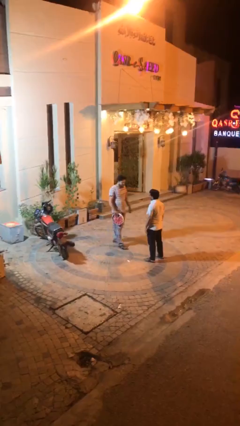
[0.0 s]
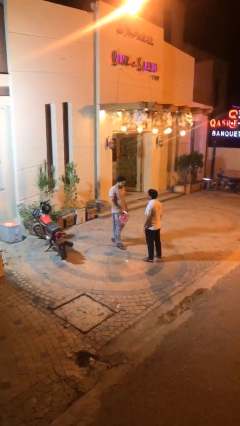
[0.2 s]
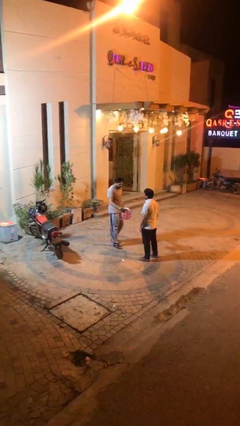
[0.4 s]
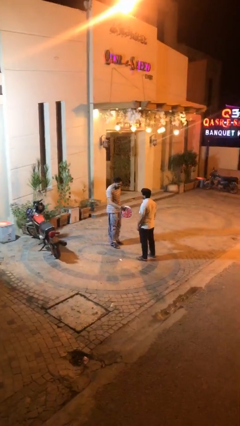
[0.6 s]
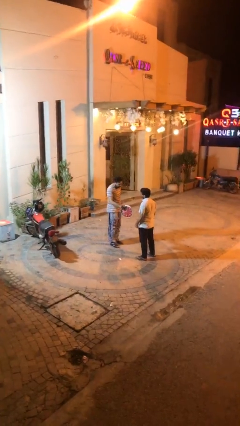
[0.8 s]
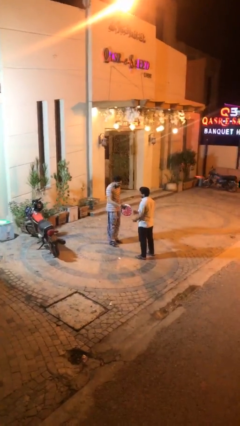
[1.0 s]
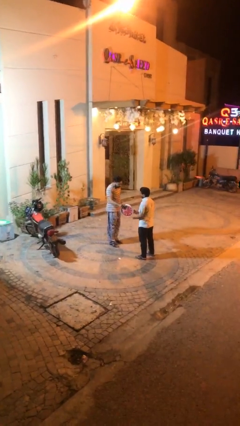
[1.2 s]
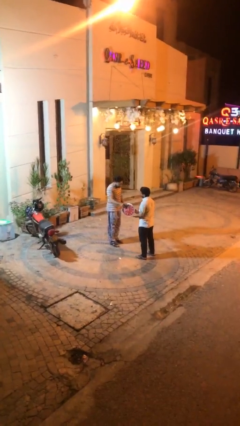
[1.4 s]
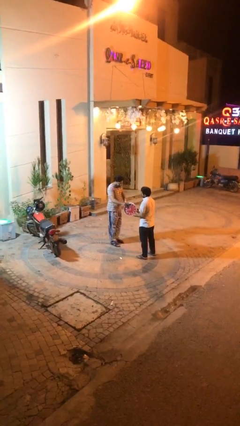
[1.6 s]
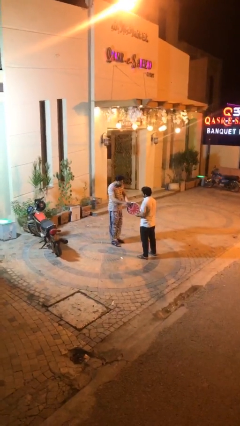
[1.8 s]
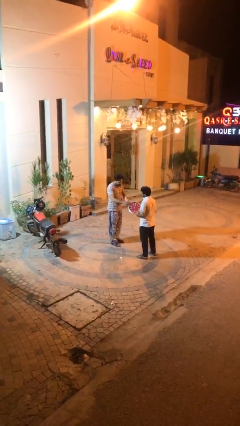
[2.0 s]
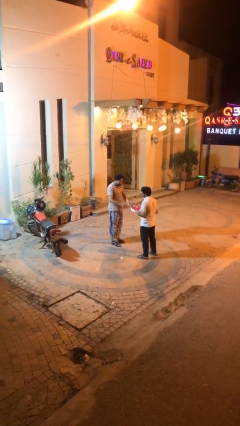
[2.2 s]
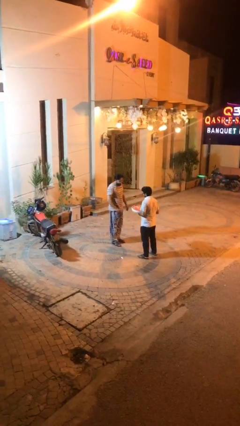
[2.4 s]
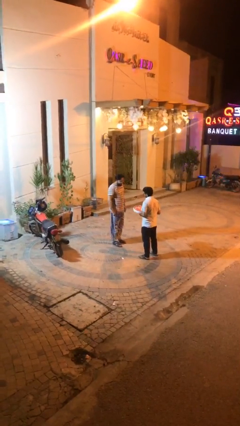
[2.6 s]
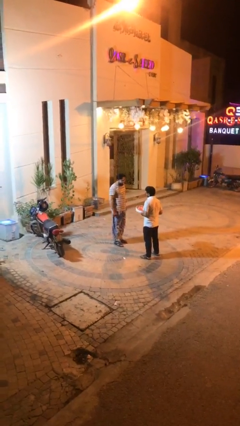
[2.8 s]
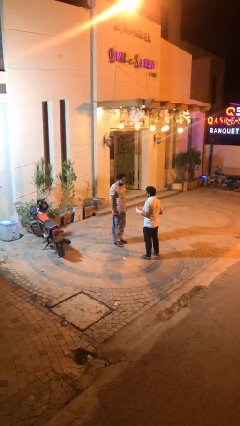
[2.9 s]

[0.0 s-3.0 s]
person transfers object to person

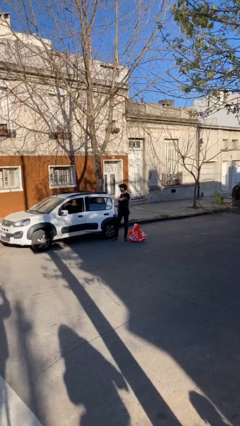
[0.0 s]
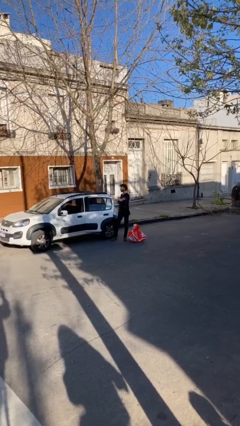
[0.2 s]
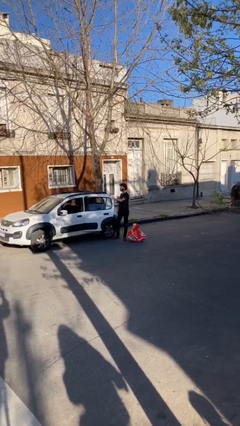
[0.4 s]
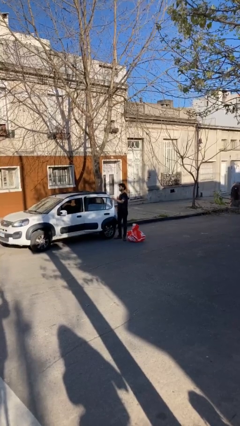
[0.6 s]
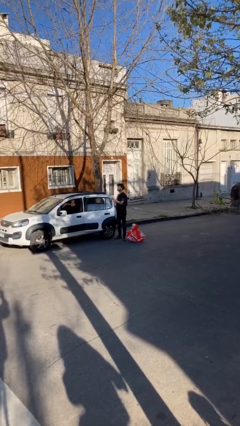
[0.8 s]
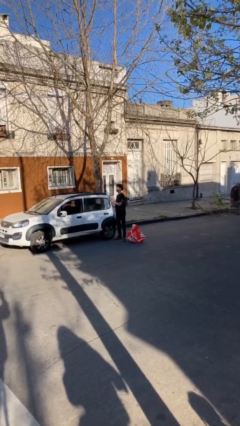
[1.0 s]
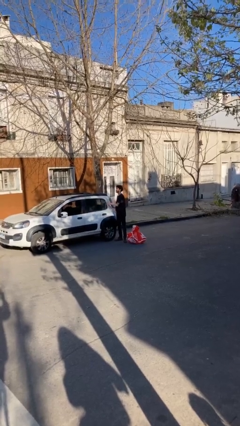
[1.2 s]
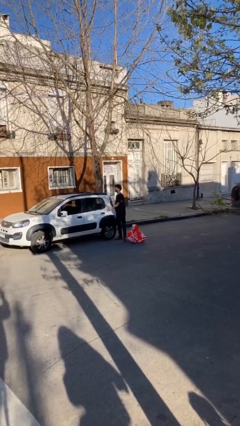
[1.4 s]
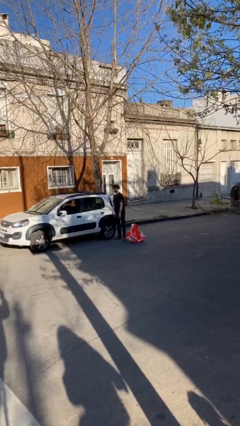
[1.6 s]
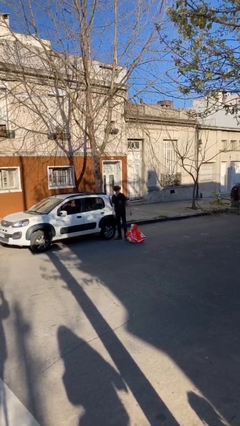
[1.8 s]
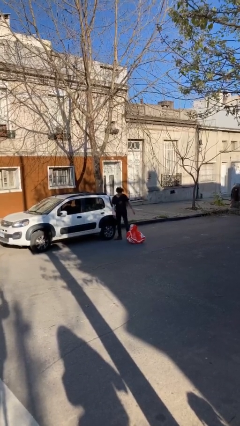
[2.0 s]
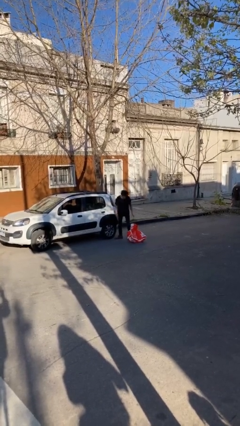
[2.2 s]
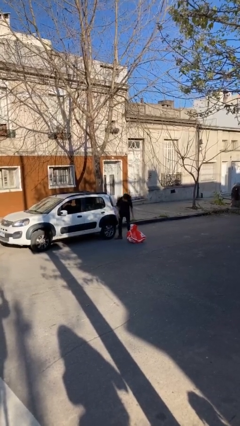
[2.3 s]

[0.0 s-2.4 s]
person closes car door

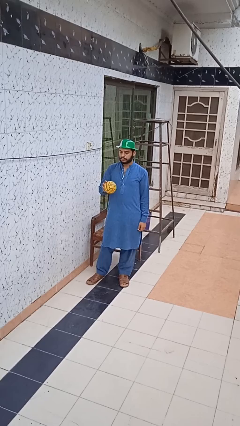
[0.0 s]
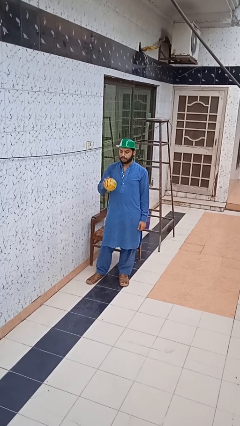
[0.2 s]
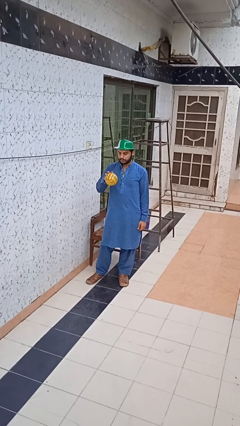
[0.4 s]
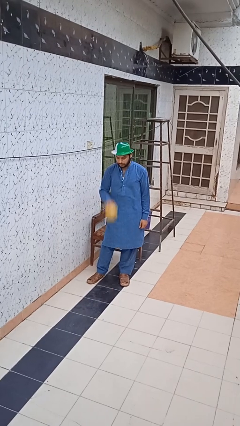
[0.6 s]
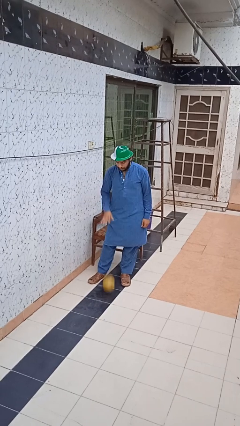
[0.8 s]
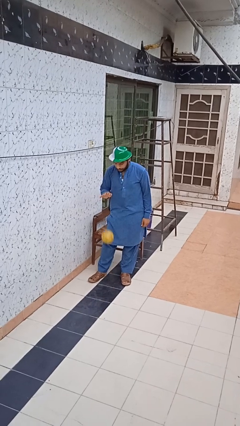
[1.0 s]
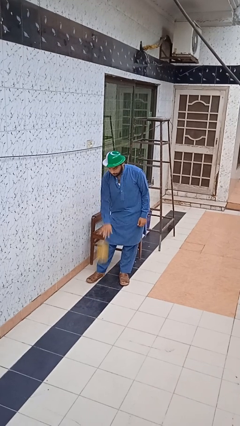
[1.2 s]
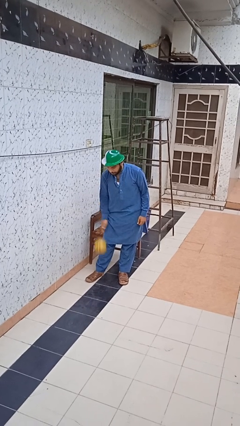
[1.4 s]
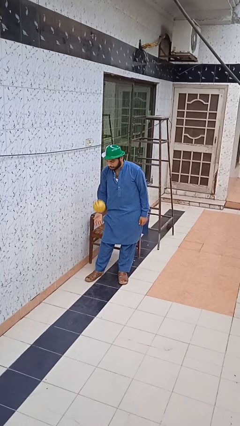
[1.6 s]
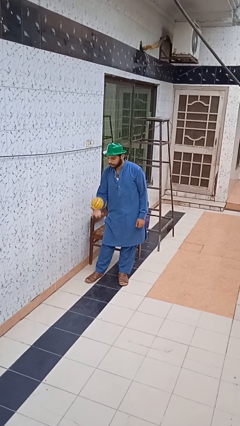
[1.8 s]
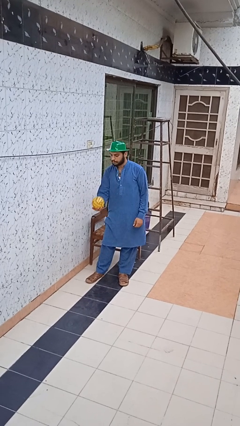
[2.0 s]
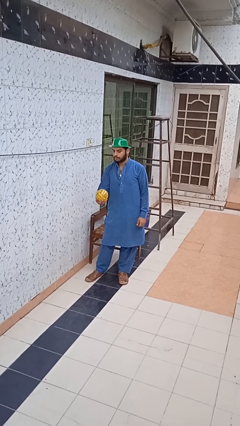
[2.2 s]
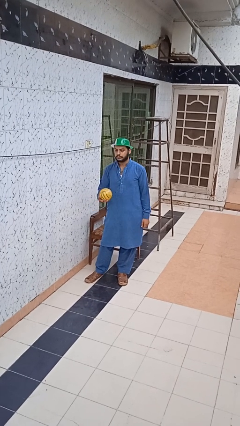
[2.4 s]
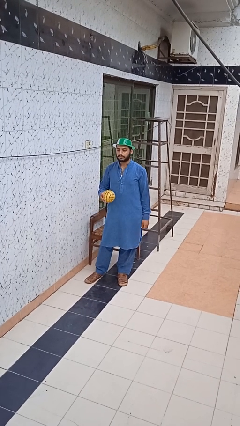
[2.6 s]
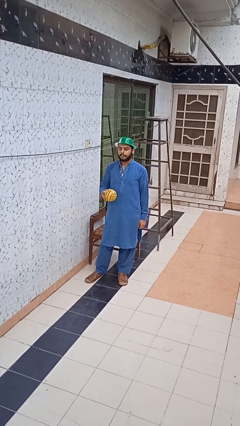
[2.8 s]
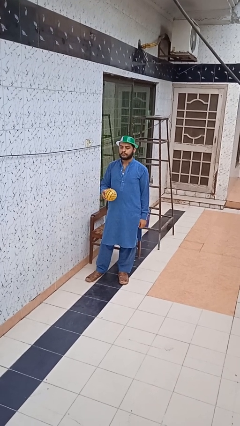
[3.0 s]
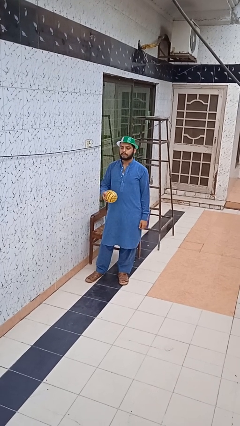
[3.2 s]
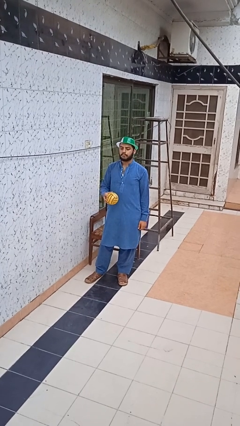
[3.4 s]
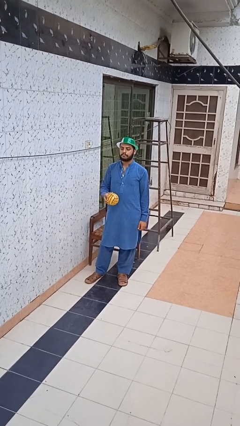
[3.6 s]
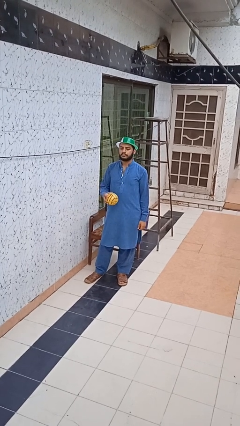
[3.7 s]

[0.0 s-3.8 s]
person bounces ball on floor

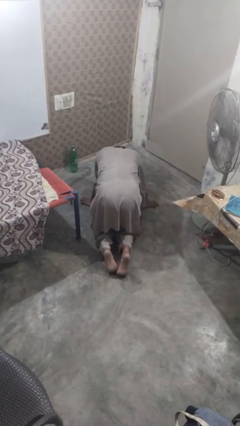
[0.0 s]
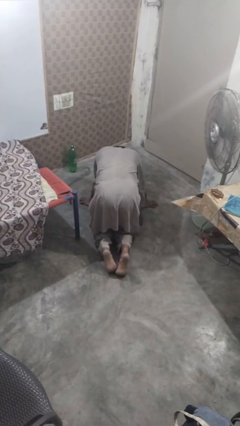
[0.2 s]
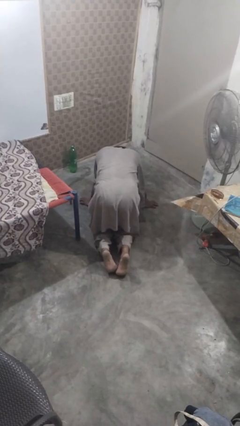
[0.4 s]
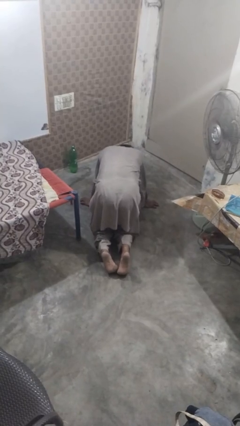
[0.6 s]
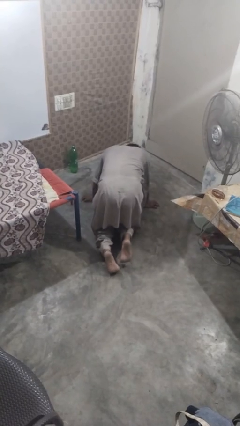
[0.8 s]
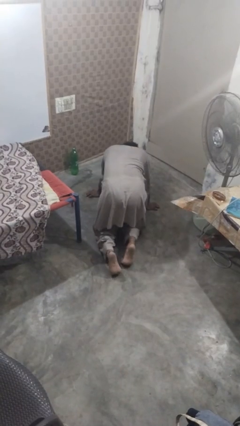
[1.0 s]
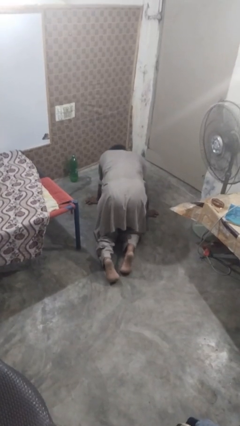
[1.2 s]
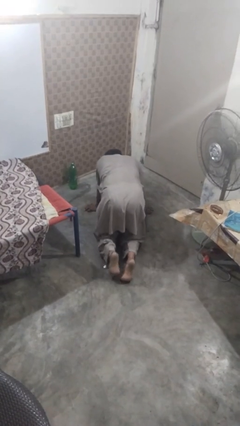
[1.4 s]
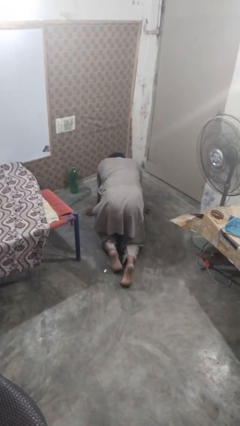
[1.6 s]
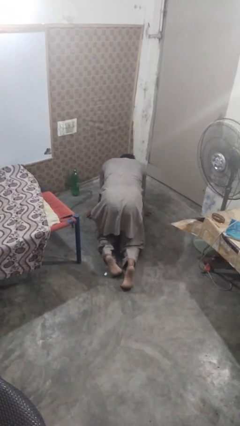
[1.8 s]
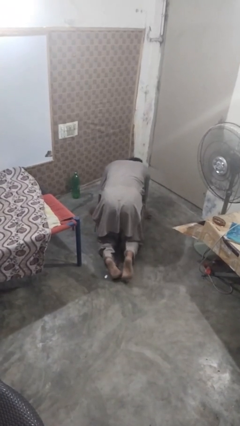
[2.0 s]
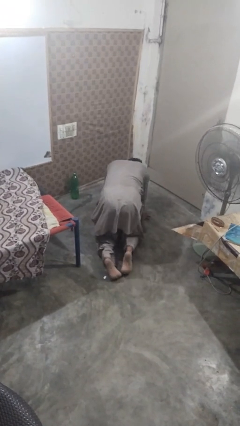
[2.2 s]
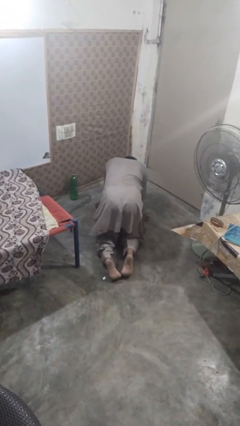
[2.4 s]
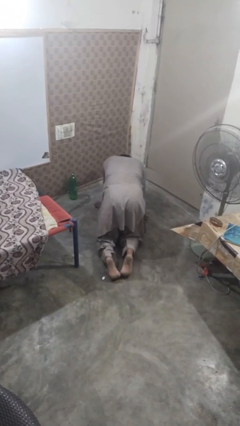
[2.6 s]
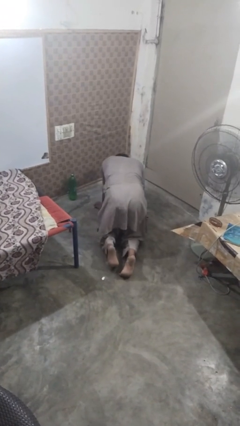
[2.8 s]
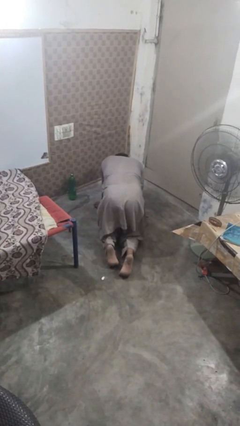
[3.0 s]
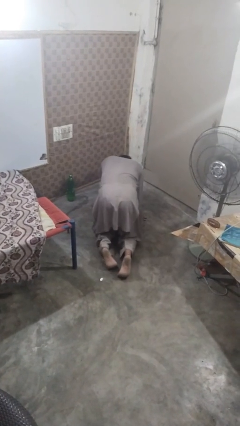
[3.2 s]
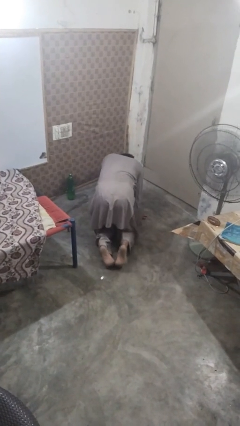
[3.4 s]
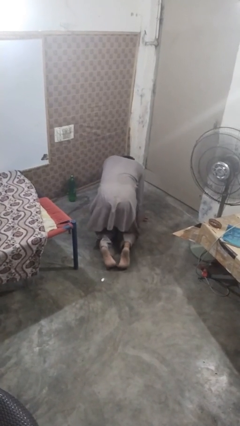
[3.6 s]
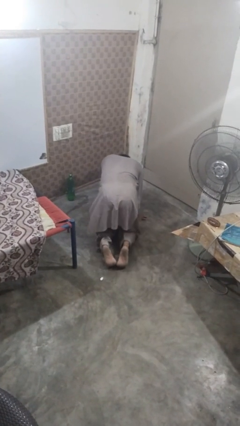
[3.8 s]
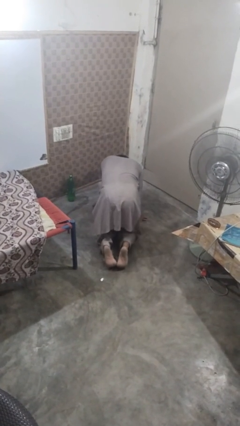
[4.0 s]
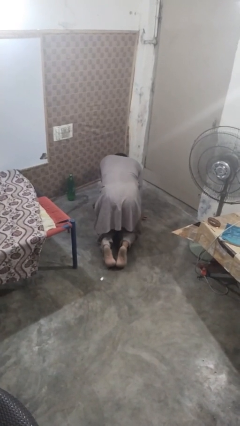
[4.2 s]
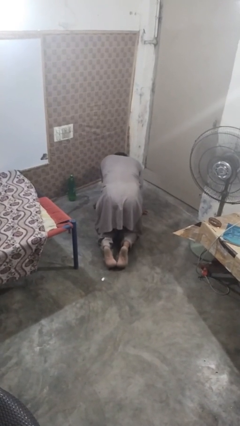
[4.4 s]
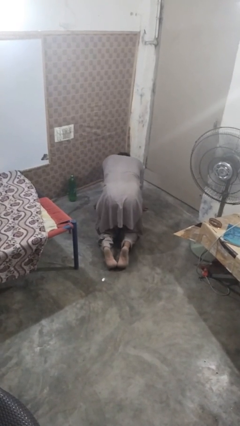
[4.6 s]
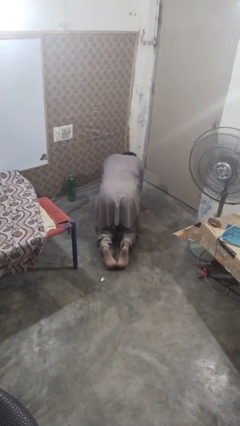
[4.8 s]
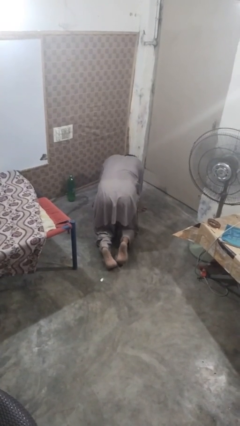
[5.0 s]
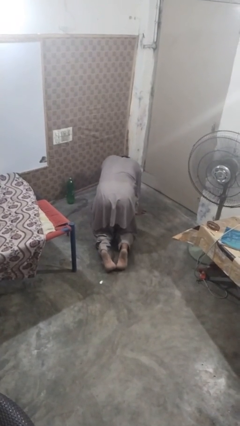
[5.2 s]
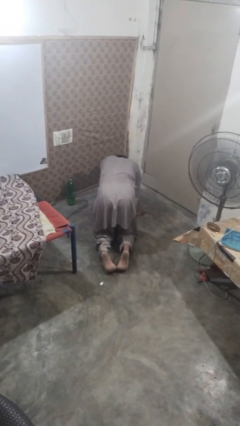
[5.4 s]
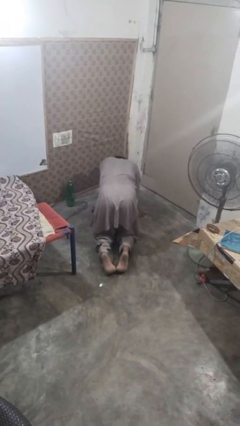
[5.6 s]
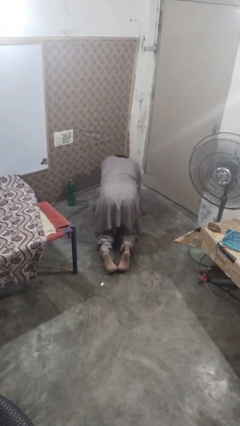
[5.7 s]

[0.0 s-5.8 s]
person crawls

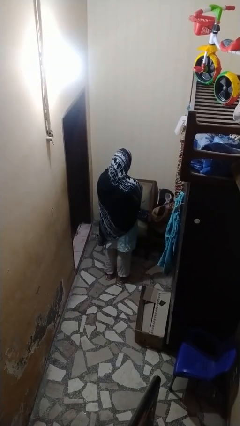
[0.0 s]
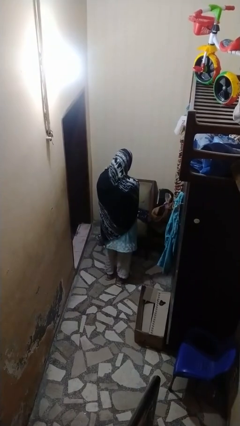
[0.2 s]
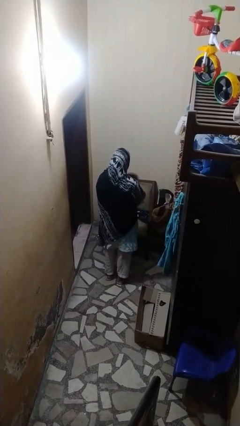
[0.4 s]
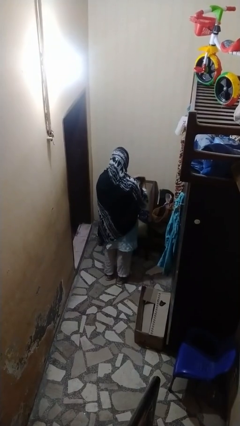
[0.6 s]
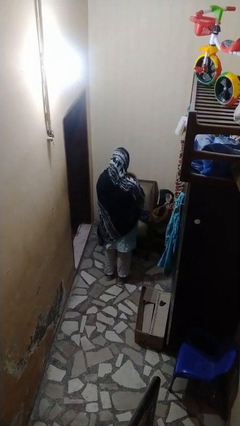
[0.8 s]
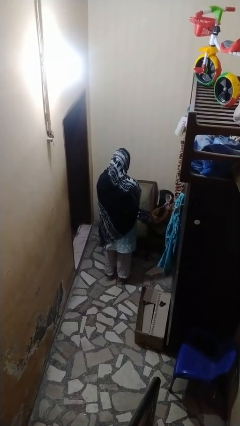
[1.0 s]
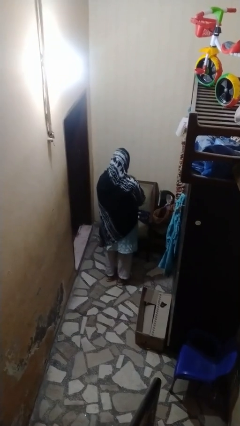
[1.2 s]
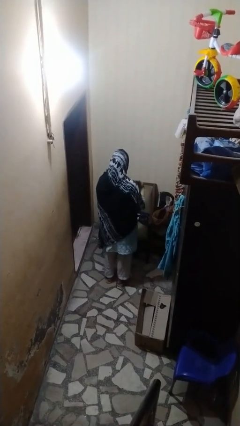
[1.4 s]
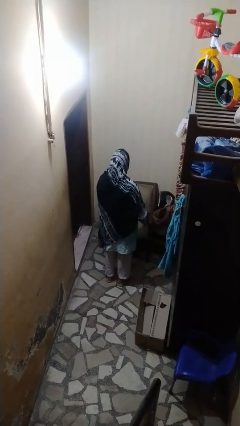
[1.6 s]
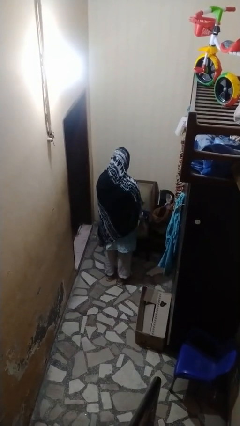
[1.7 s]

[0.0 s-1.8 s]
person gestures cut

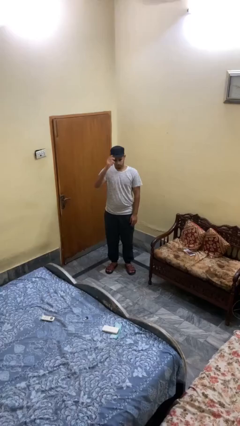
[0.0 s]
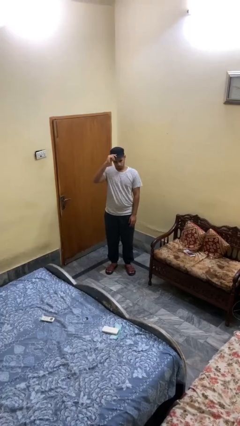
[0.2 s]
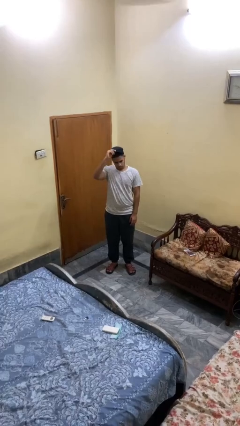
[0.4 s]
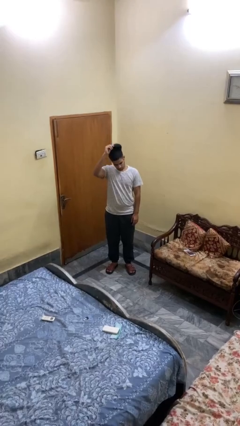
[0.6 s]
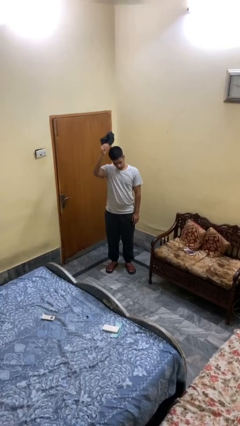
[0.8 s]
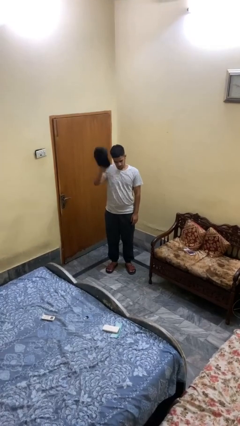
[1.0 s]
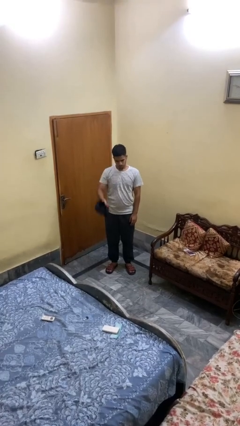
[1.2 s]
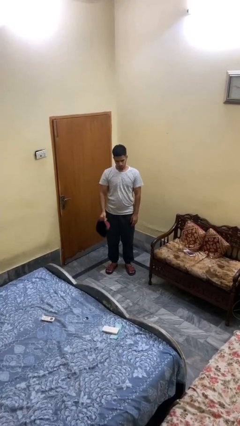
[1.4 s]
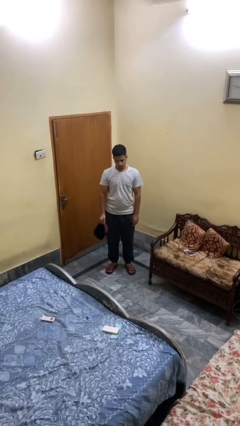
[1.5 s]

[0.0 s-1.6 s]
person takes off hat
